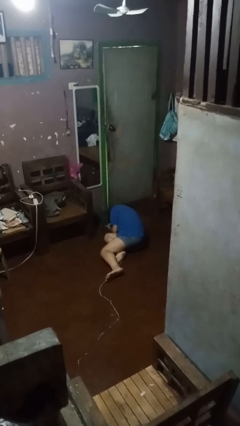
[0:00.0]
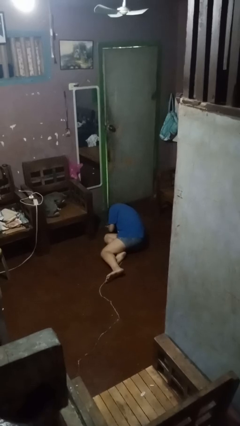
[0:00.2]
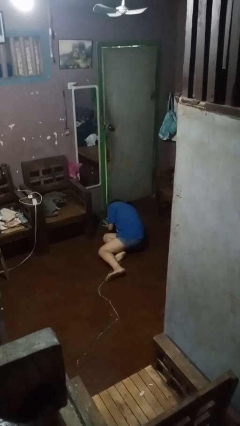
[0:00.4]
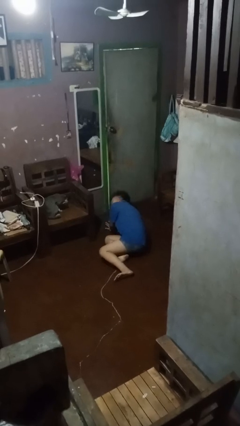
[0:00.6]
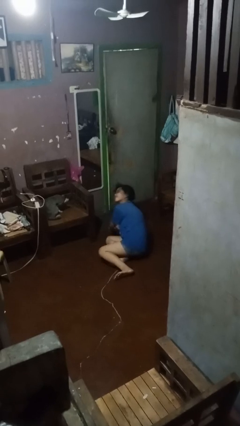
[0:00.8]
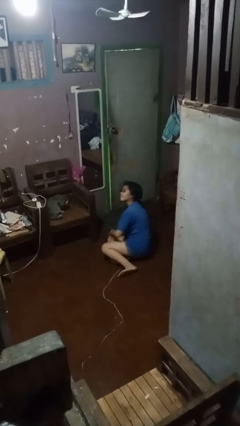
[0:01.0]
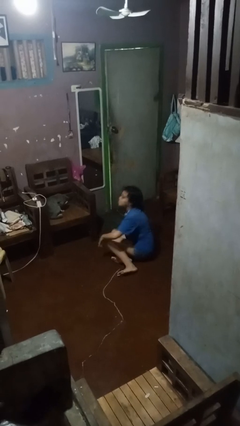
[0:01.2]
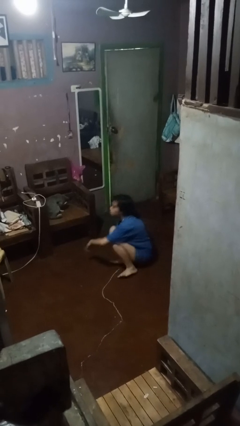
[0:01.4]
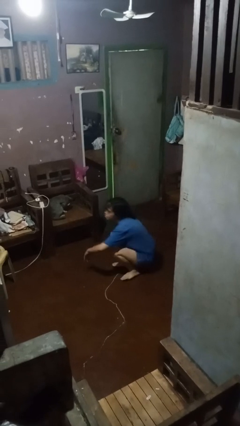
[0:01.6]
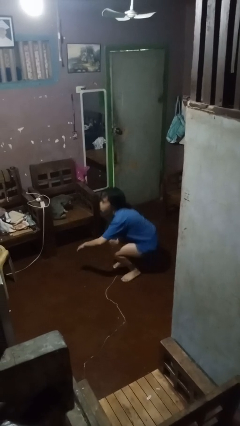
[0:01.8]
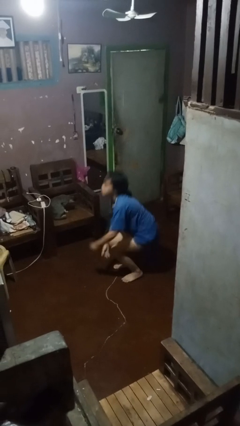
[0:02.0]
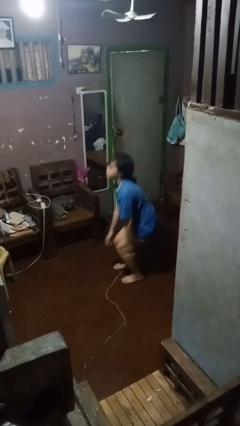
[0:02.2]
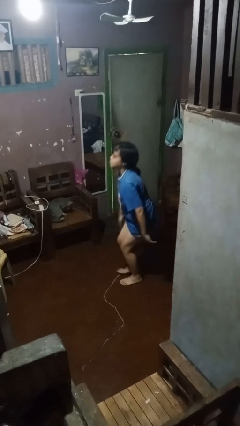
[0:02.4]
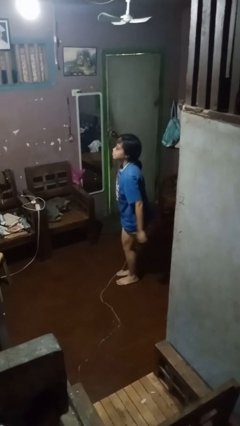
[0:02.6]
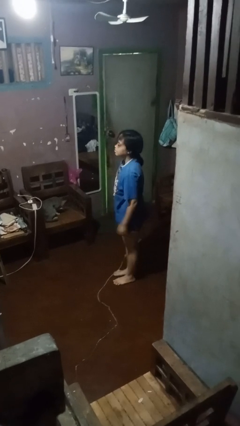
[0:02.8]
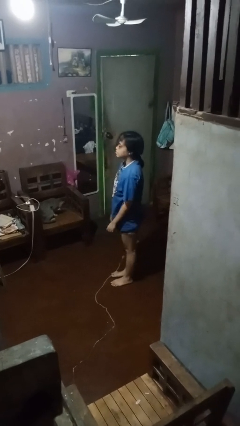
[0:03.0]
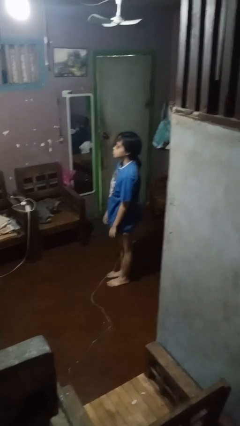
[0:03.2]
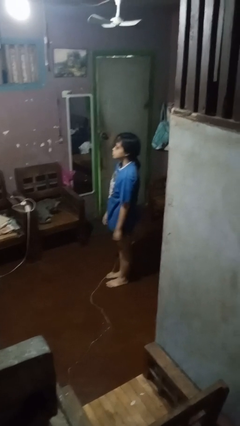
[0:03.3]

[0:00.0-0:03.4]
person stands up from floor

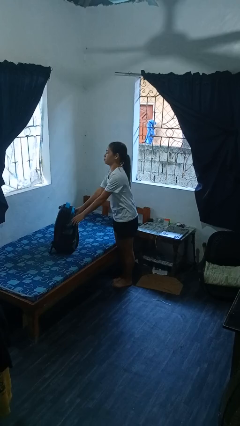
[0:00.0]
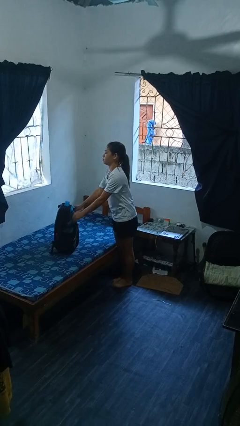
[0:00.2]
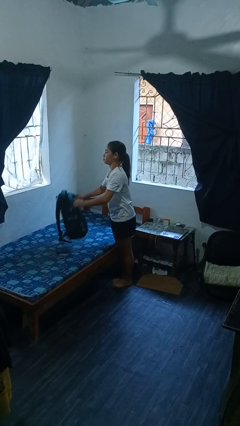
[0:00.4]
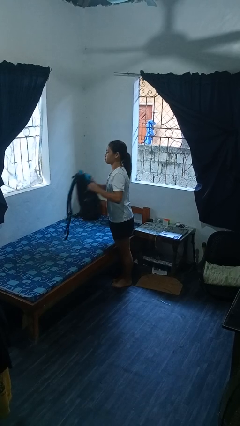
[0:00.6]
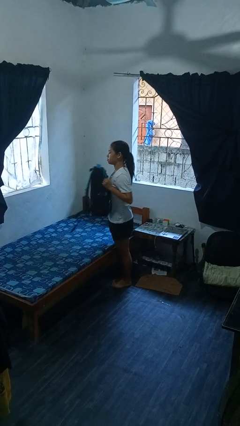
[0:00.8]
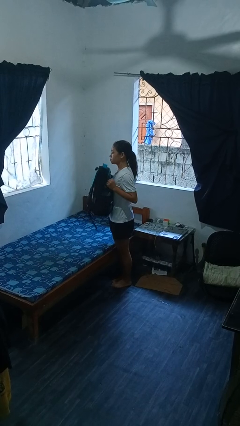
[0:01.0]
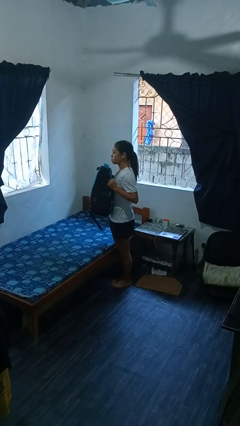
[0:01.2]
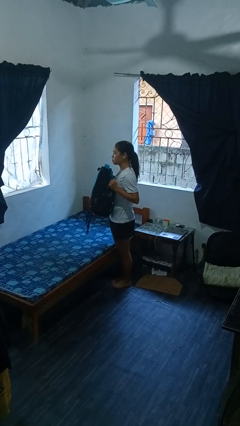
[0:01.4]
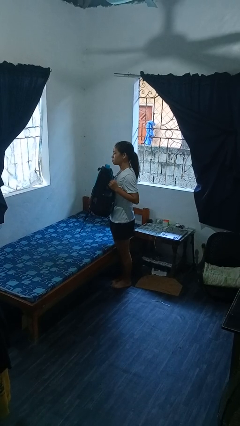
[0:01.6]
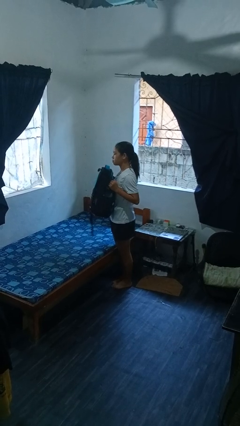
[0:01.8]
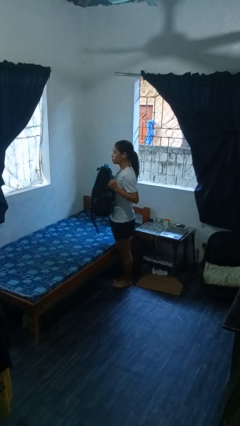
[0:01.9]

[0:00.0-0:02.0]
person picks up object from bed

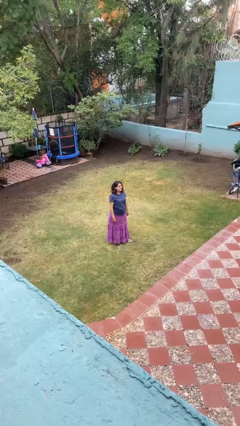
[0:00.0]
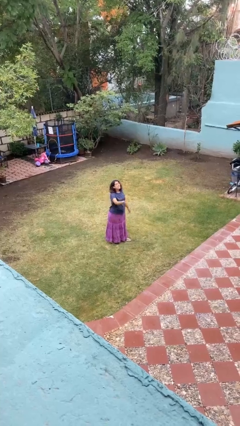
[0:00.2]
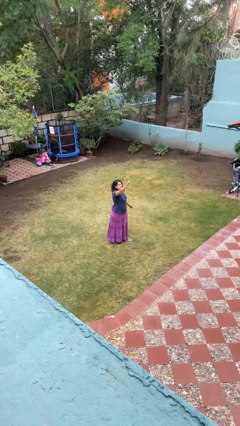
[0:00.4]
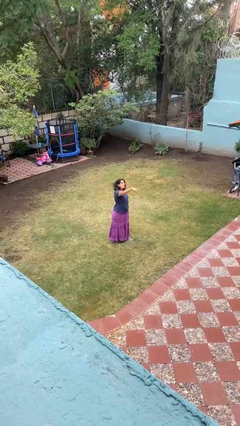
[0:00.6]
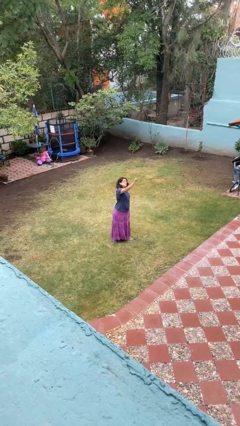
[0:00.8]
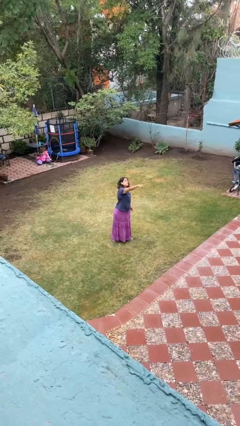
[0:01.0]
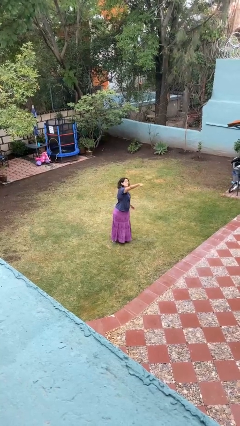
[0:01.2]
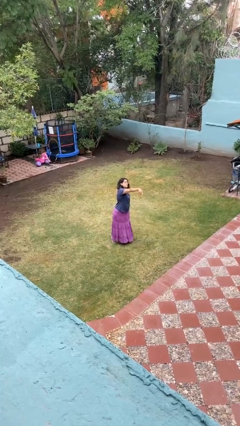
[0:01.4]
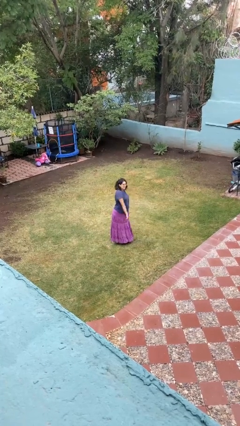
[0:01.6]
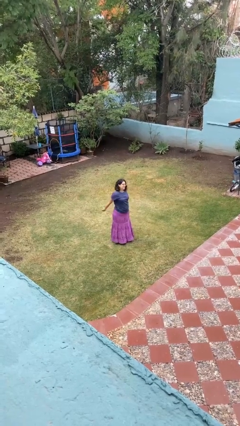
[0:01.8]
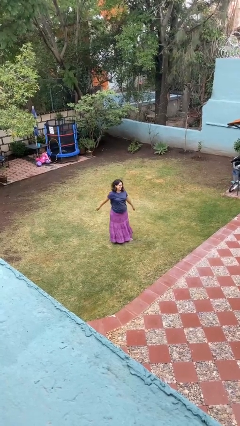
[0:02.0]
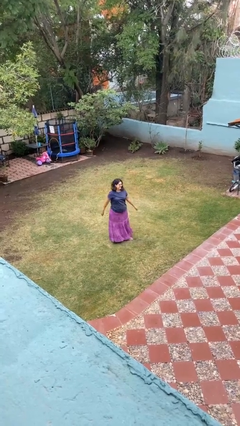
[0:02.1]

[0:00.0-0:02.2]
person points at person

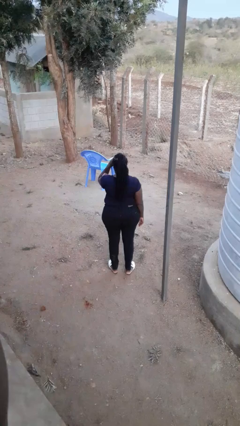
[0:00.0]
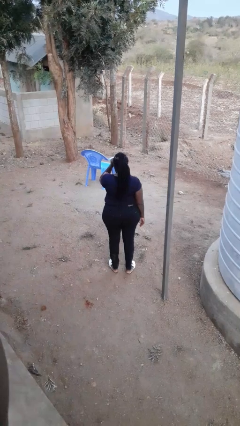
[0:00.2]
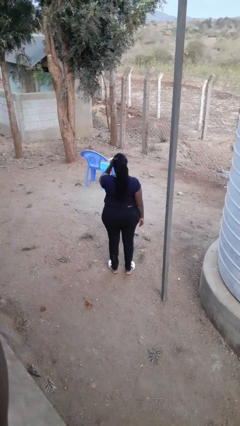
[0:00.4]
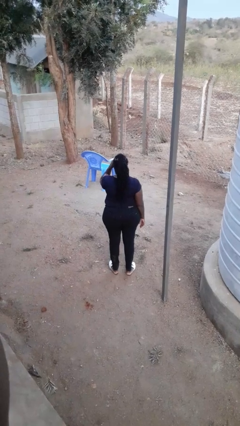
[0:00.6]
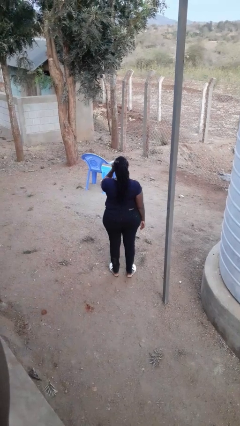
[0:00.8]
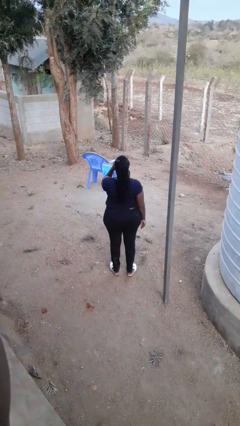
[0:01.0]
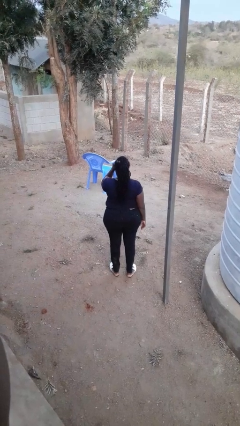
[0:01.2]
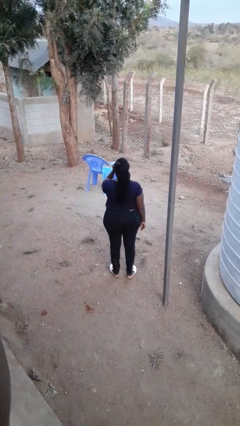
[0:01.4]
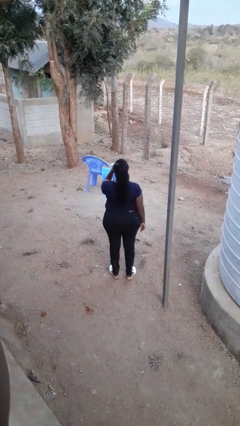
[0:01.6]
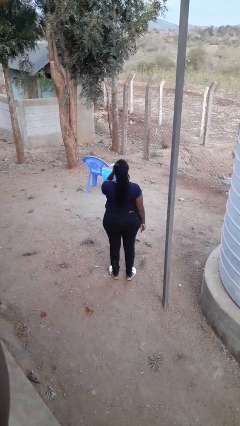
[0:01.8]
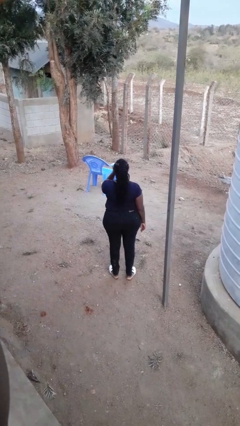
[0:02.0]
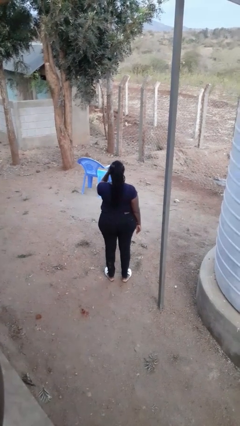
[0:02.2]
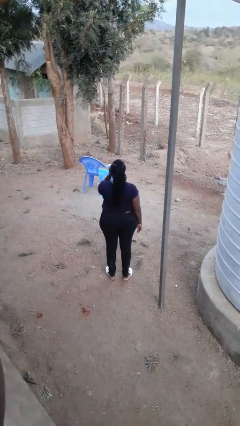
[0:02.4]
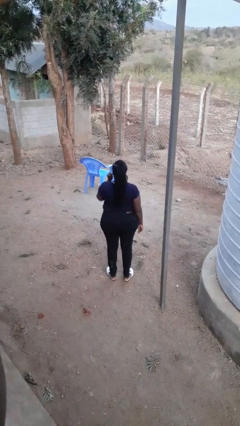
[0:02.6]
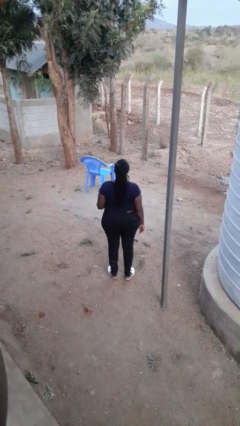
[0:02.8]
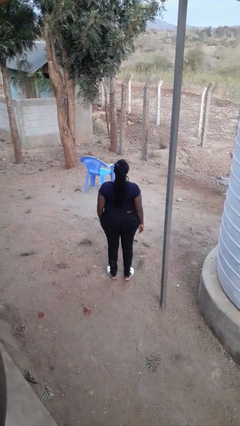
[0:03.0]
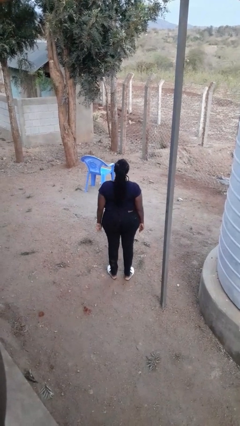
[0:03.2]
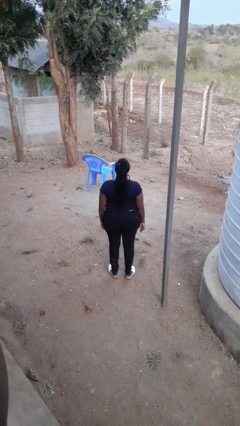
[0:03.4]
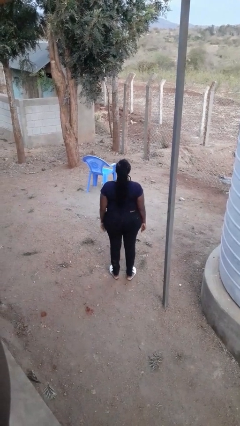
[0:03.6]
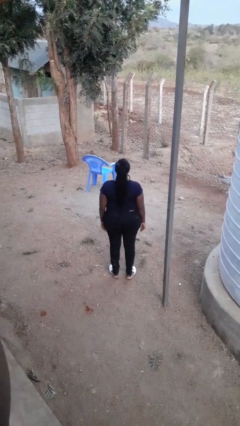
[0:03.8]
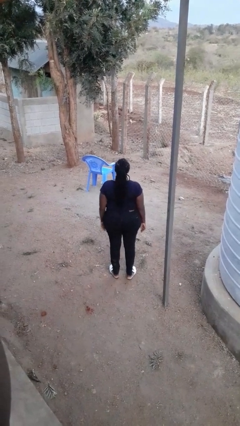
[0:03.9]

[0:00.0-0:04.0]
person rubs eyes

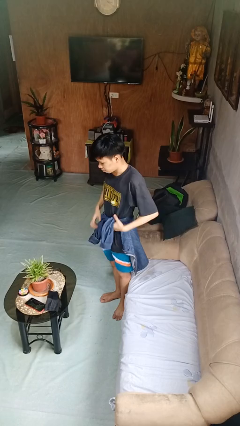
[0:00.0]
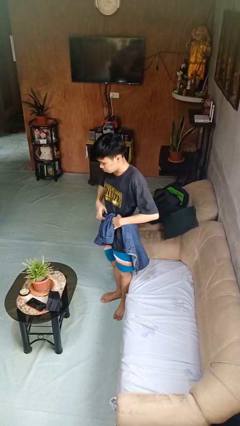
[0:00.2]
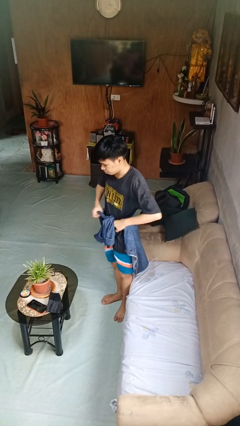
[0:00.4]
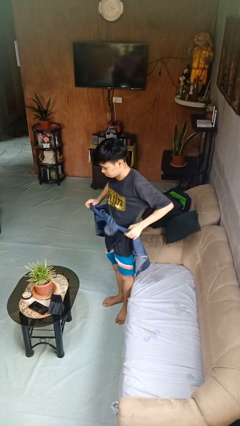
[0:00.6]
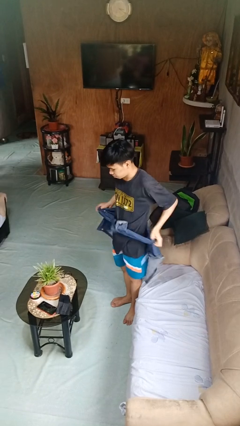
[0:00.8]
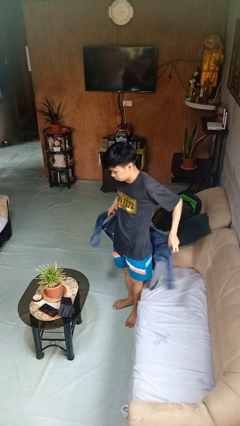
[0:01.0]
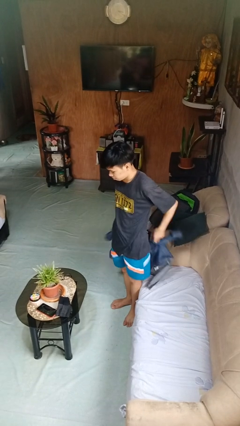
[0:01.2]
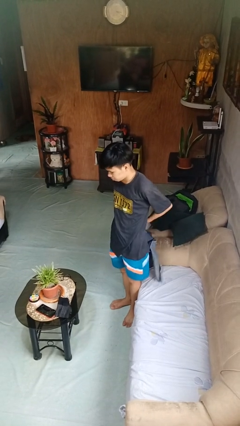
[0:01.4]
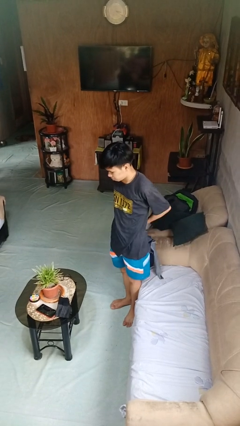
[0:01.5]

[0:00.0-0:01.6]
person unties jacket around waist

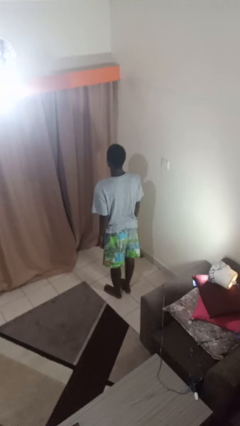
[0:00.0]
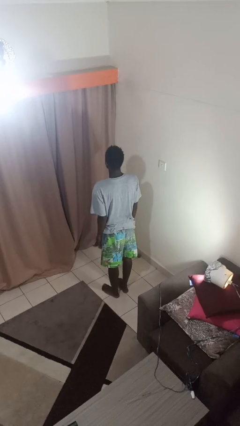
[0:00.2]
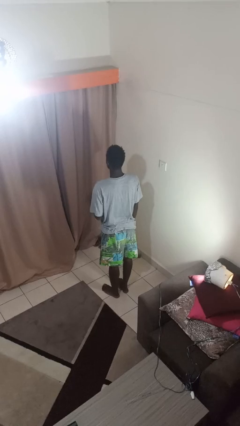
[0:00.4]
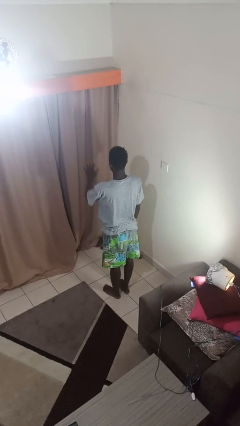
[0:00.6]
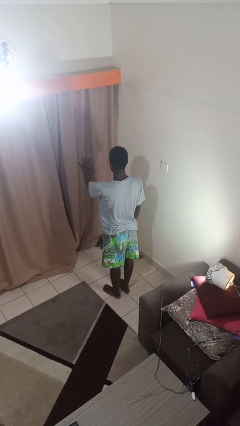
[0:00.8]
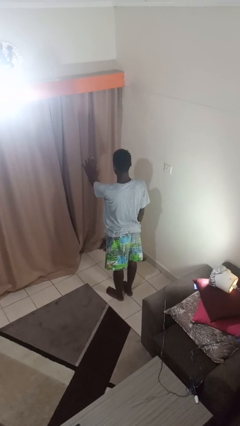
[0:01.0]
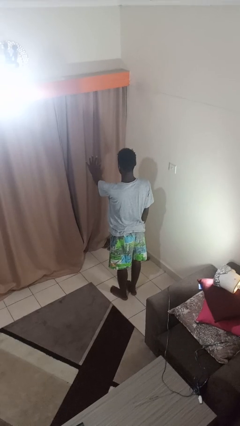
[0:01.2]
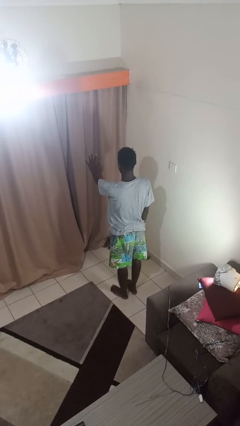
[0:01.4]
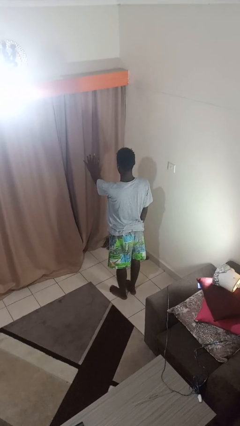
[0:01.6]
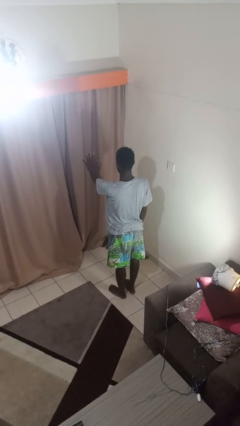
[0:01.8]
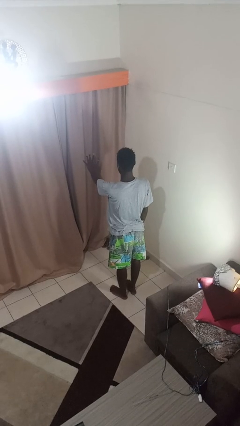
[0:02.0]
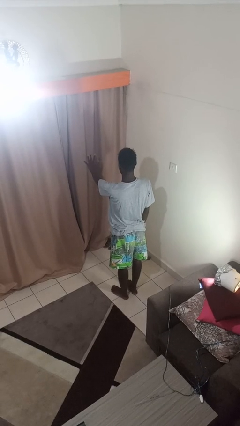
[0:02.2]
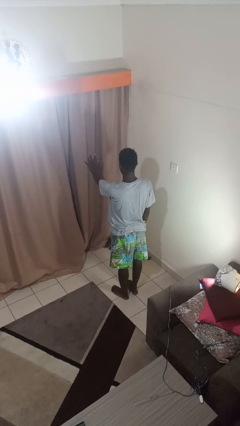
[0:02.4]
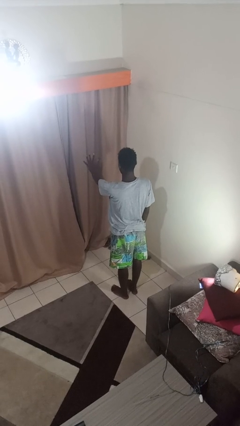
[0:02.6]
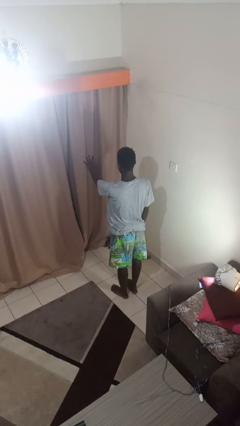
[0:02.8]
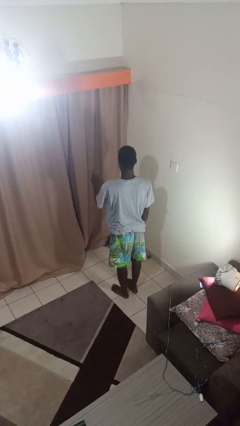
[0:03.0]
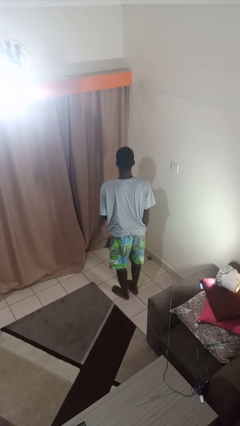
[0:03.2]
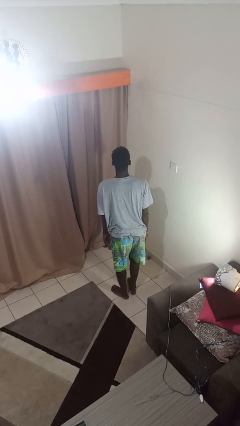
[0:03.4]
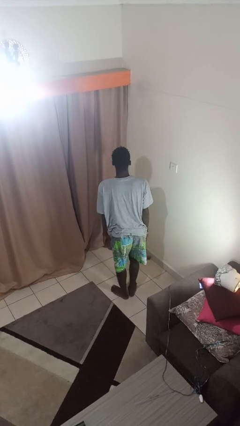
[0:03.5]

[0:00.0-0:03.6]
person gestures number five

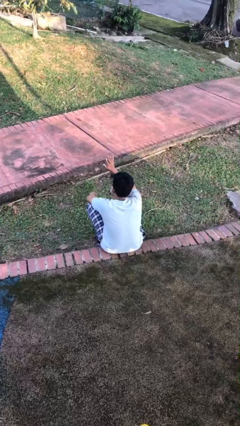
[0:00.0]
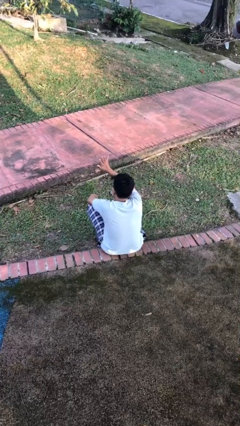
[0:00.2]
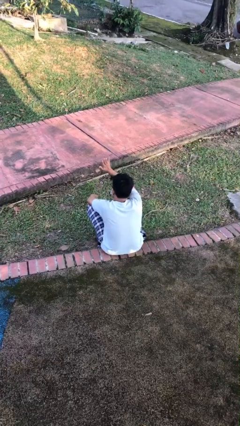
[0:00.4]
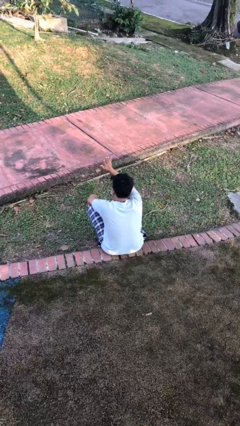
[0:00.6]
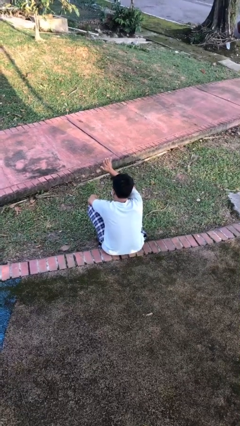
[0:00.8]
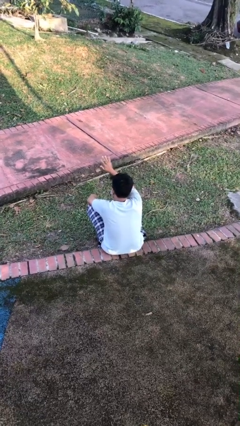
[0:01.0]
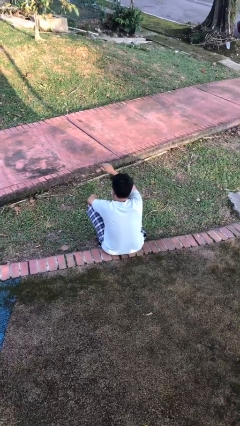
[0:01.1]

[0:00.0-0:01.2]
person gestures stop
